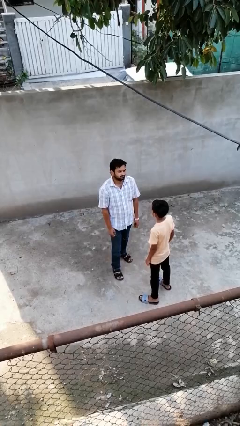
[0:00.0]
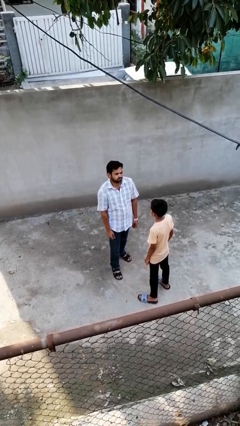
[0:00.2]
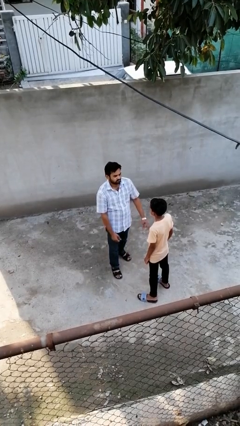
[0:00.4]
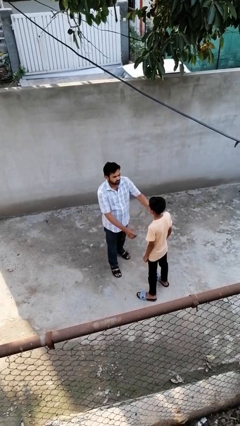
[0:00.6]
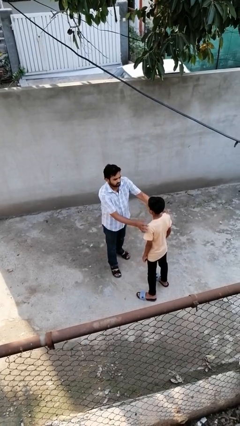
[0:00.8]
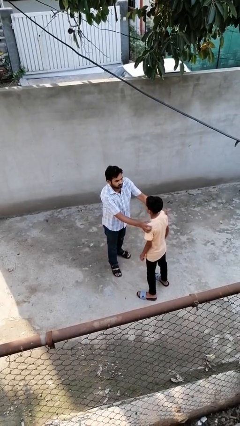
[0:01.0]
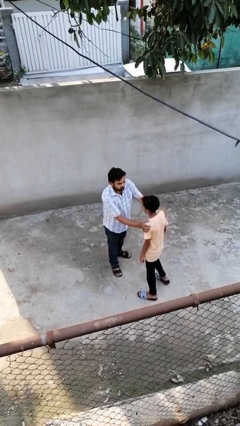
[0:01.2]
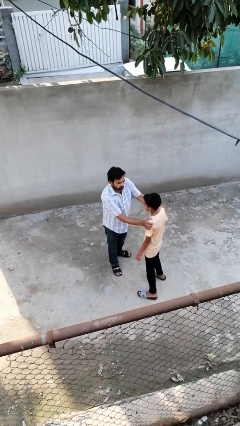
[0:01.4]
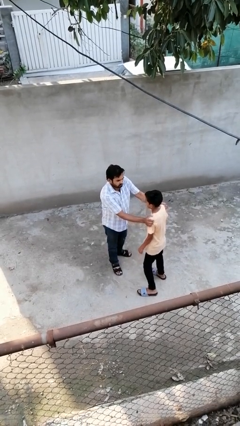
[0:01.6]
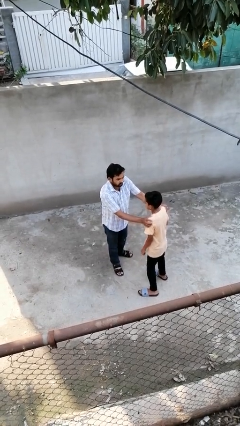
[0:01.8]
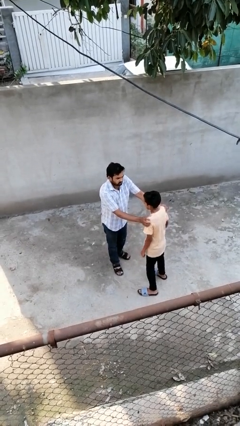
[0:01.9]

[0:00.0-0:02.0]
person grabs person by shoulder

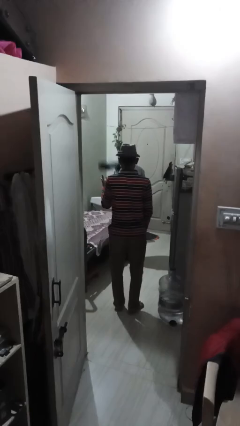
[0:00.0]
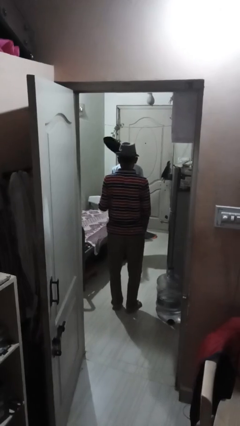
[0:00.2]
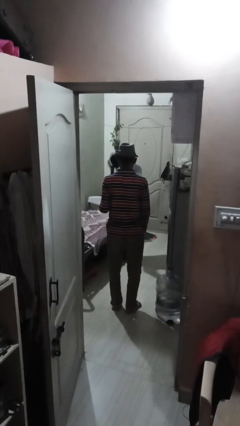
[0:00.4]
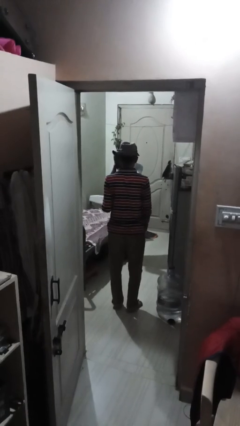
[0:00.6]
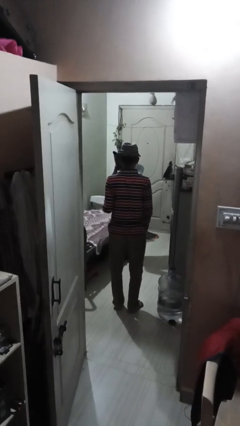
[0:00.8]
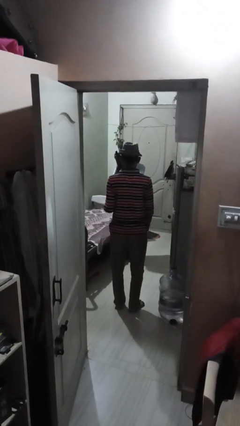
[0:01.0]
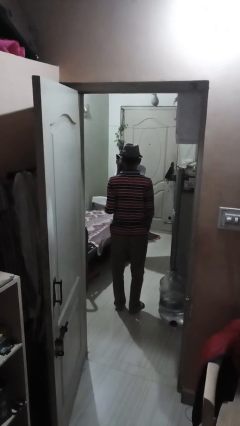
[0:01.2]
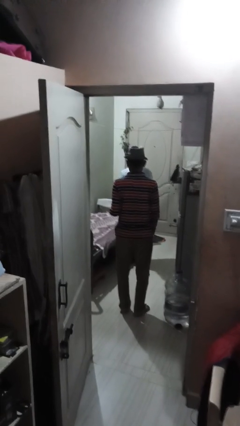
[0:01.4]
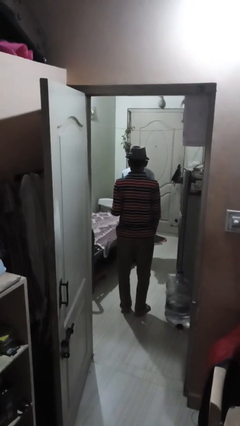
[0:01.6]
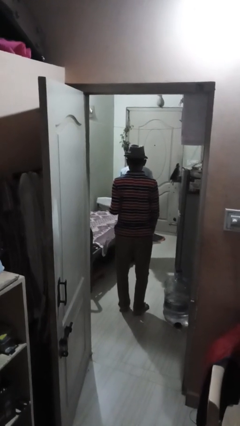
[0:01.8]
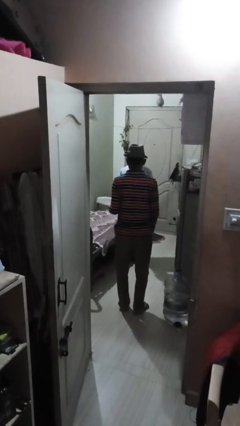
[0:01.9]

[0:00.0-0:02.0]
person catches object from person

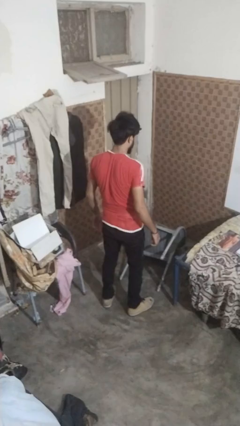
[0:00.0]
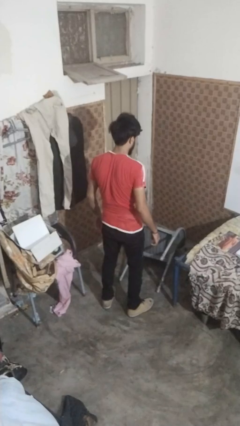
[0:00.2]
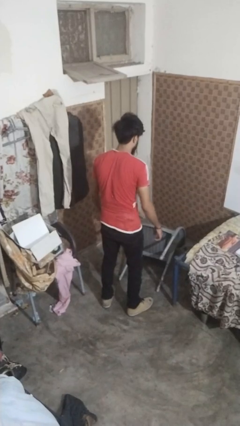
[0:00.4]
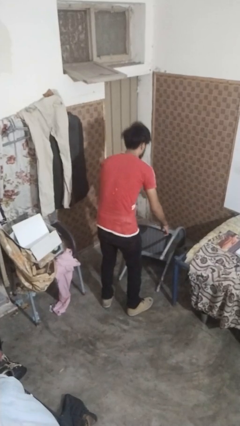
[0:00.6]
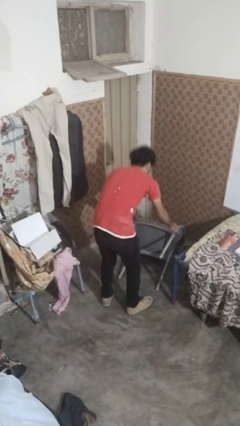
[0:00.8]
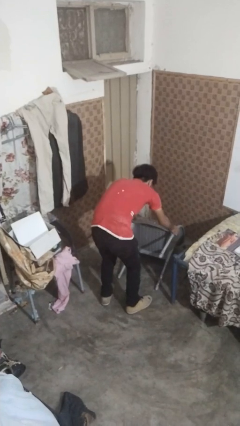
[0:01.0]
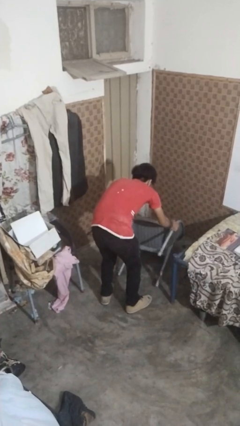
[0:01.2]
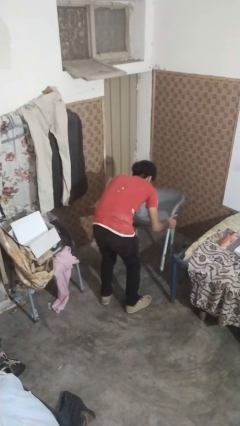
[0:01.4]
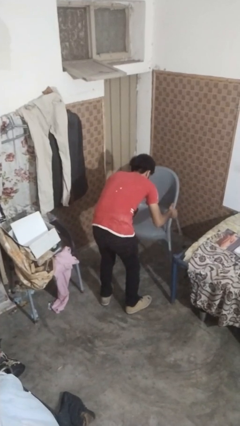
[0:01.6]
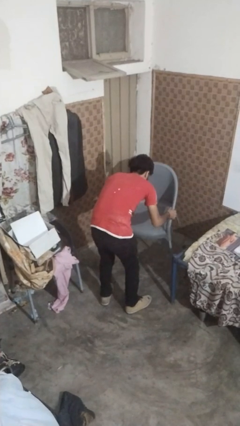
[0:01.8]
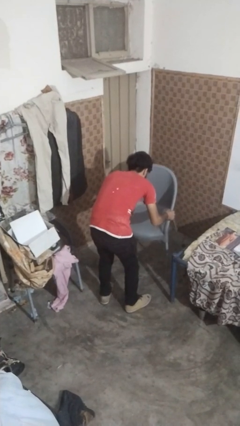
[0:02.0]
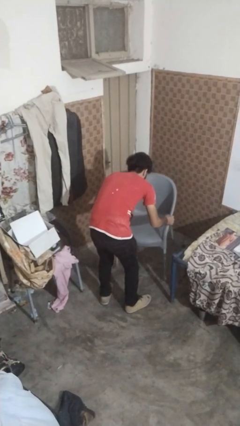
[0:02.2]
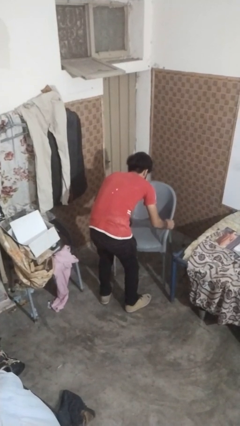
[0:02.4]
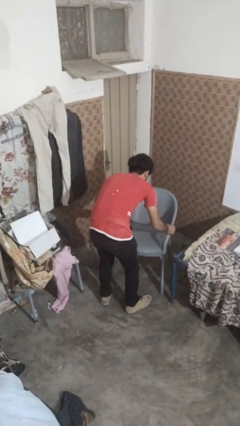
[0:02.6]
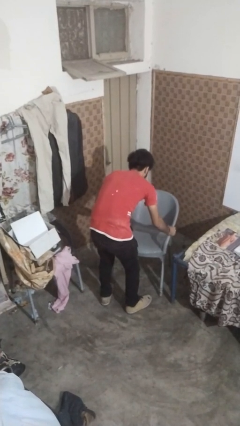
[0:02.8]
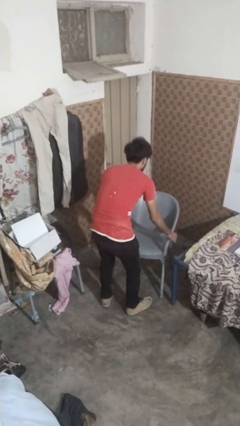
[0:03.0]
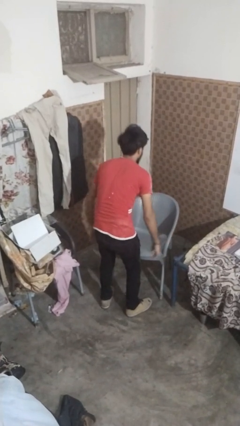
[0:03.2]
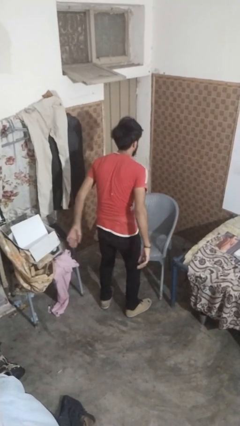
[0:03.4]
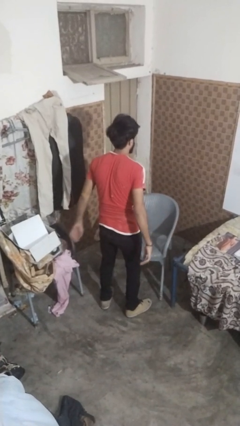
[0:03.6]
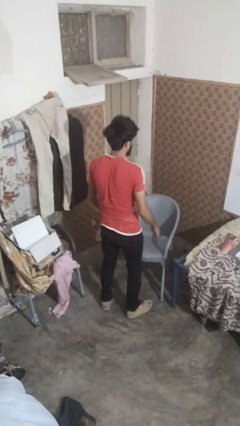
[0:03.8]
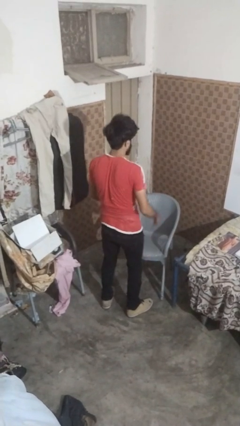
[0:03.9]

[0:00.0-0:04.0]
person sets upright furniture

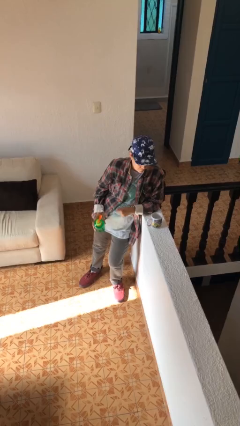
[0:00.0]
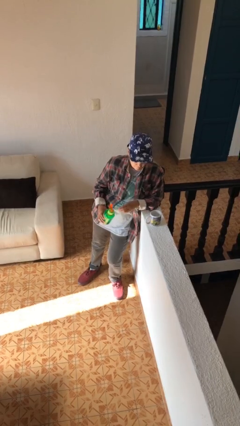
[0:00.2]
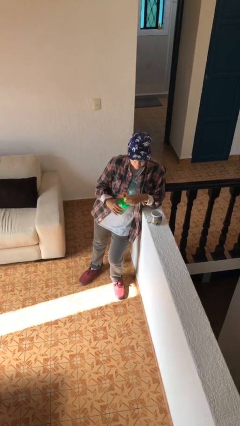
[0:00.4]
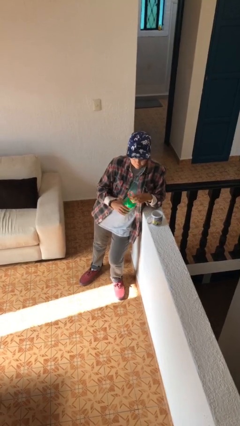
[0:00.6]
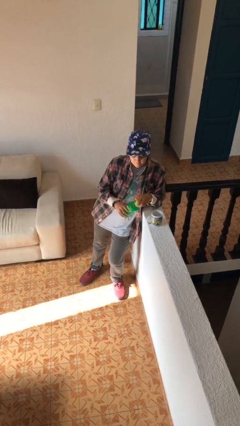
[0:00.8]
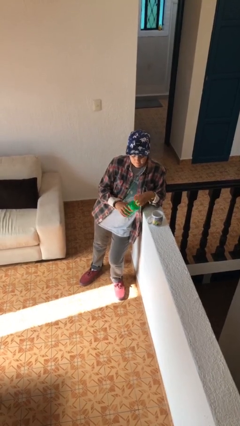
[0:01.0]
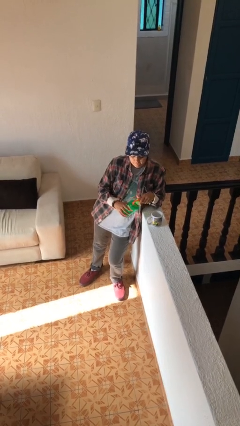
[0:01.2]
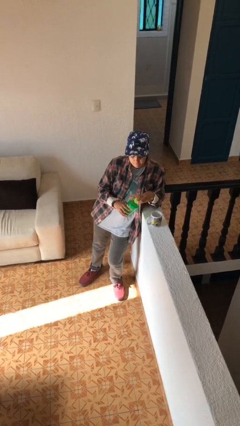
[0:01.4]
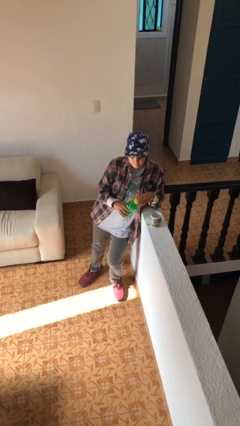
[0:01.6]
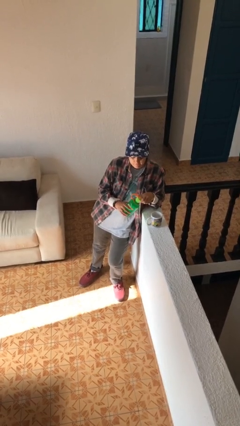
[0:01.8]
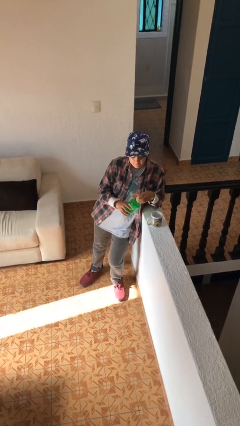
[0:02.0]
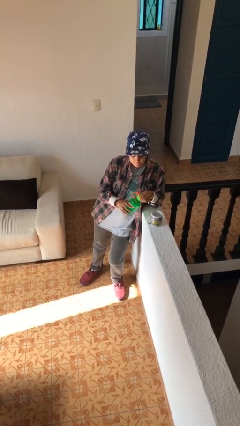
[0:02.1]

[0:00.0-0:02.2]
person unscrews lid from bottle

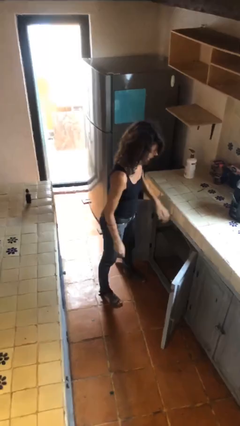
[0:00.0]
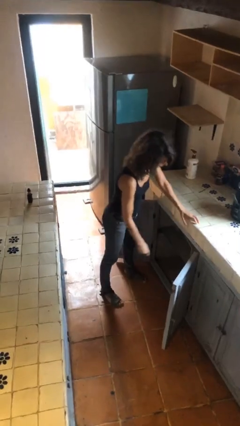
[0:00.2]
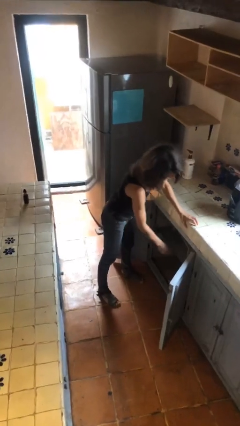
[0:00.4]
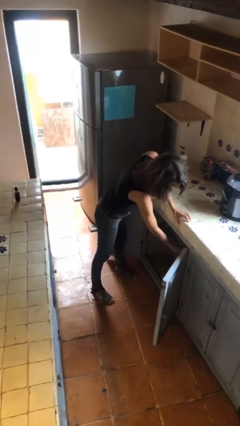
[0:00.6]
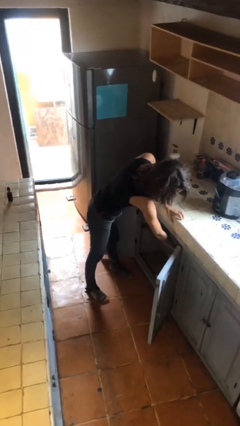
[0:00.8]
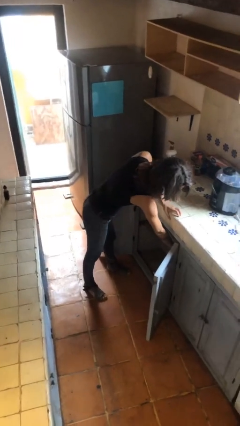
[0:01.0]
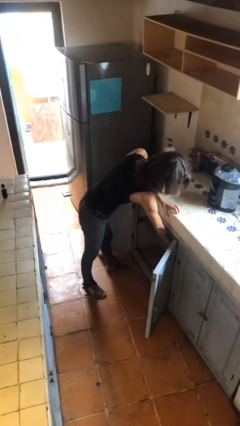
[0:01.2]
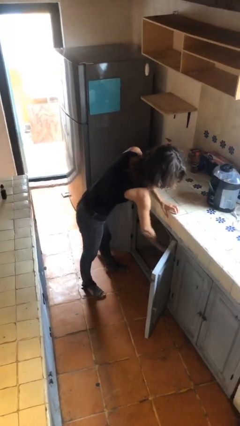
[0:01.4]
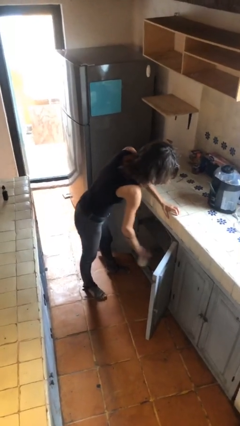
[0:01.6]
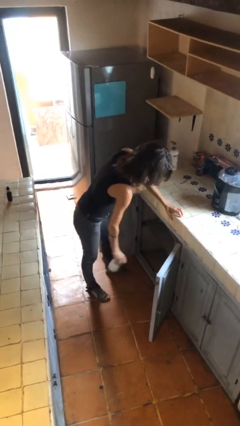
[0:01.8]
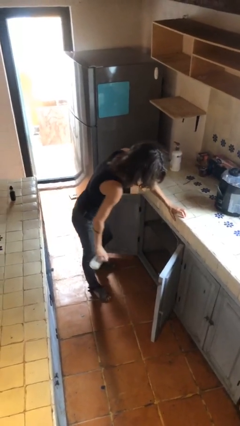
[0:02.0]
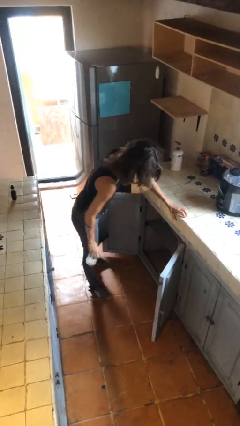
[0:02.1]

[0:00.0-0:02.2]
person picks up object from cabinet

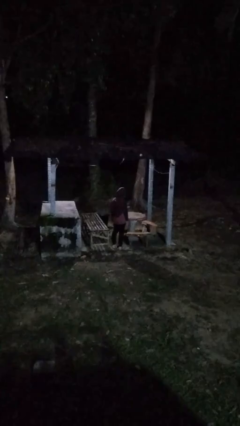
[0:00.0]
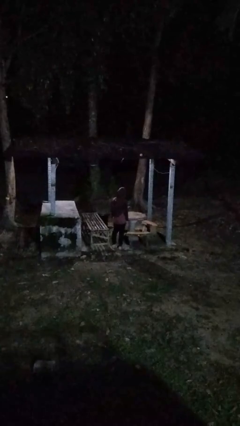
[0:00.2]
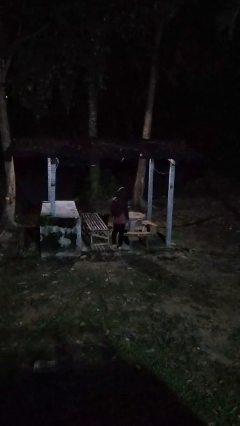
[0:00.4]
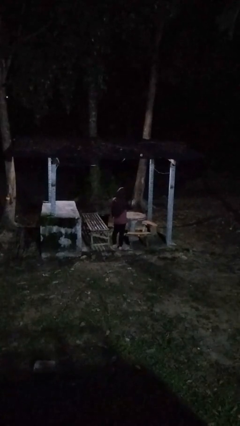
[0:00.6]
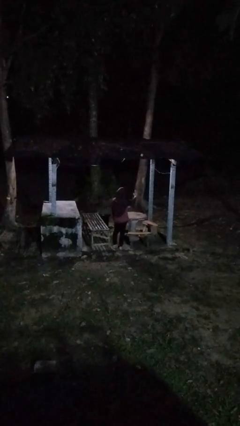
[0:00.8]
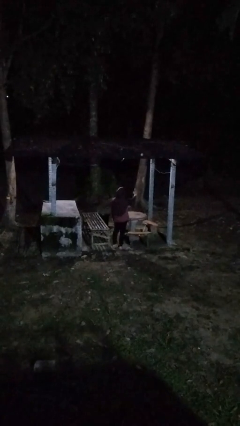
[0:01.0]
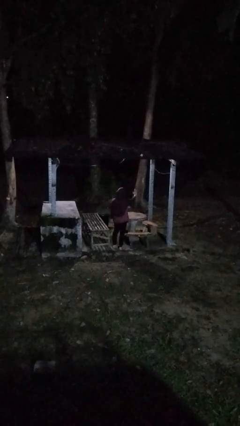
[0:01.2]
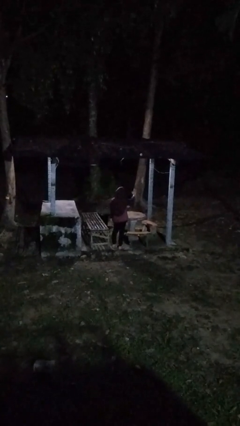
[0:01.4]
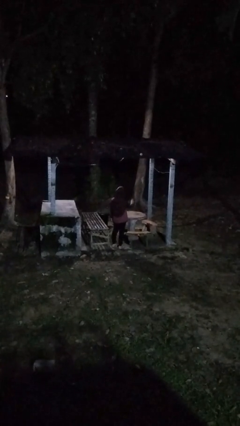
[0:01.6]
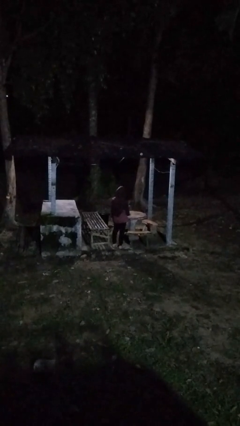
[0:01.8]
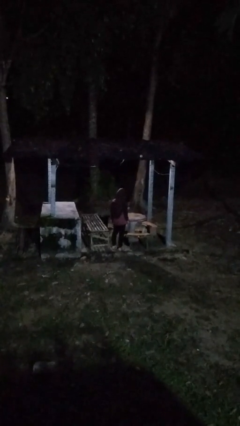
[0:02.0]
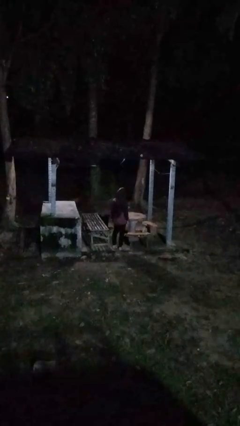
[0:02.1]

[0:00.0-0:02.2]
person gestures stop

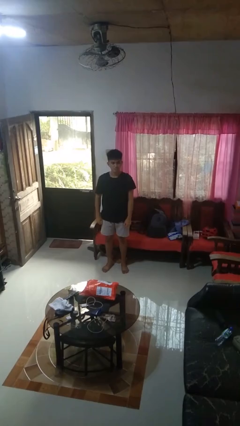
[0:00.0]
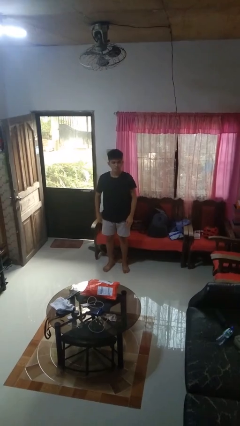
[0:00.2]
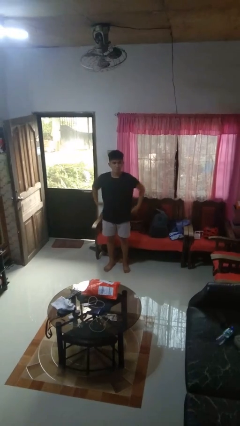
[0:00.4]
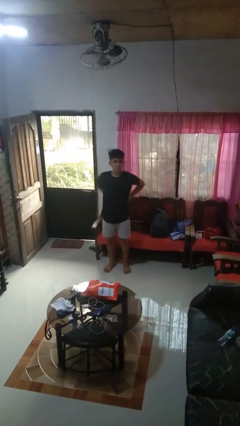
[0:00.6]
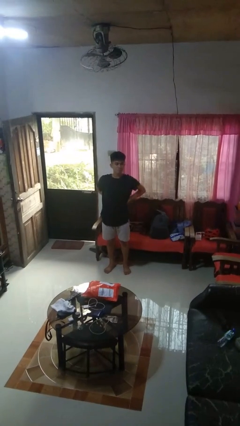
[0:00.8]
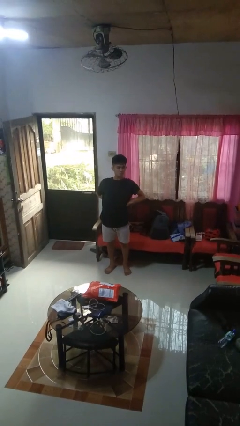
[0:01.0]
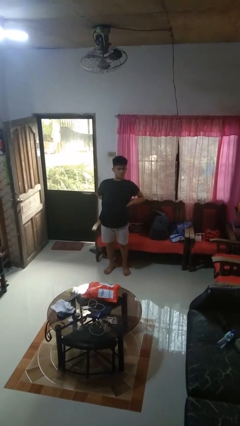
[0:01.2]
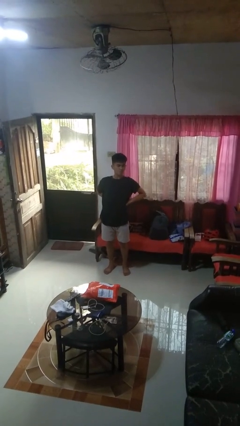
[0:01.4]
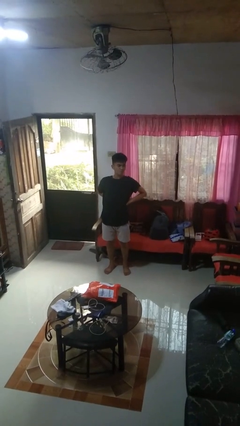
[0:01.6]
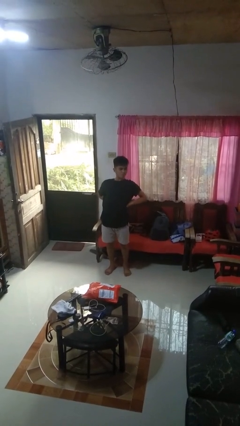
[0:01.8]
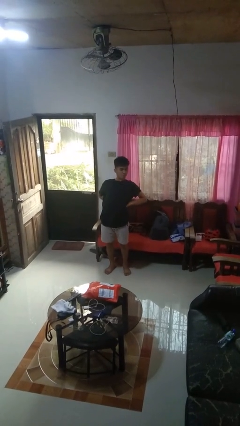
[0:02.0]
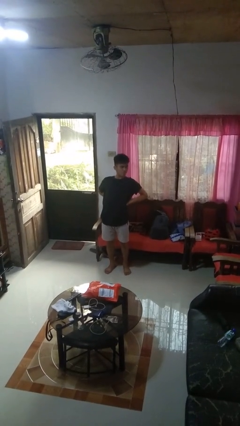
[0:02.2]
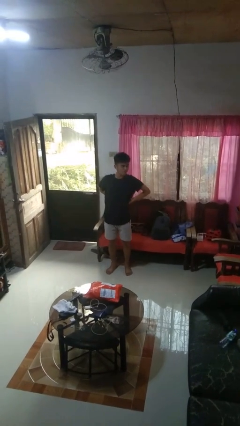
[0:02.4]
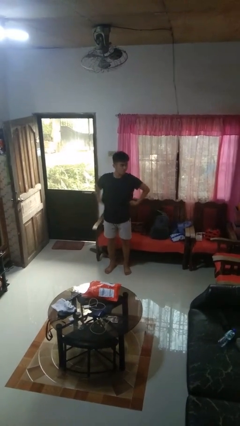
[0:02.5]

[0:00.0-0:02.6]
person stretches back

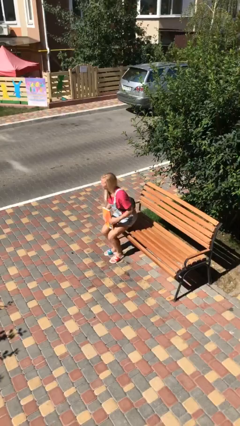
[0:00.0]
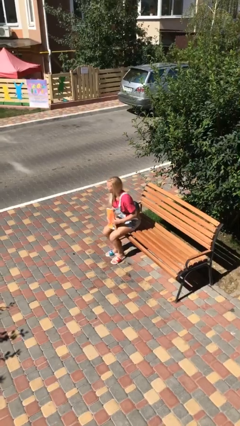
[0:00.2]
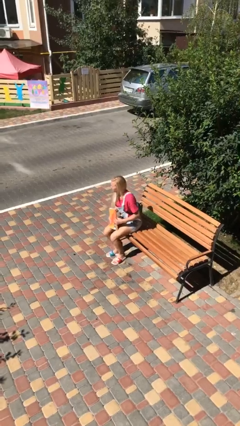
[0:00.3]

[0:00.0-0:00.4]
person sits down
